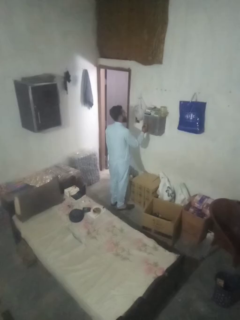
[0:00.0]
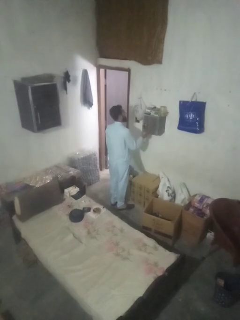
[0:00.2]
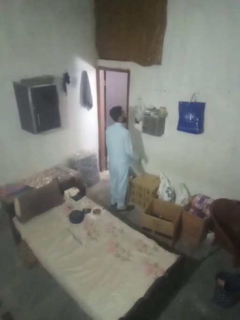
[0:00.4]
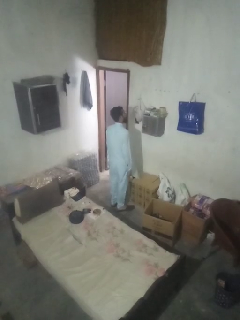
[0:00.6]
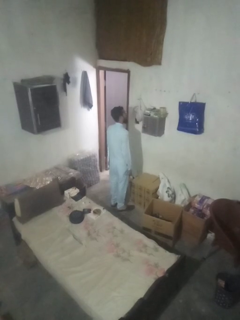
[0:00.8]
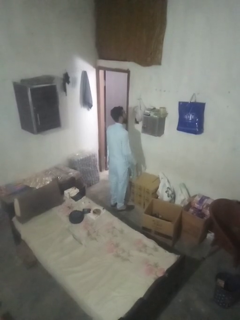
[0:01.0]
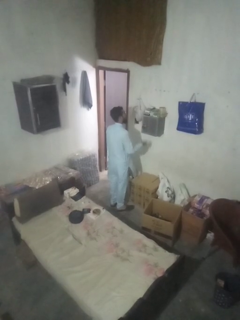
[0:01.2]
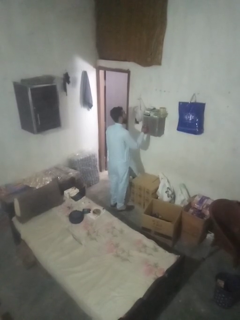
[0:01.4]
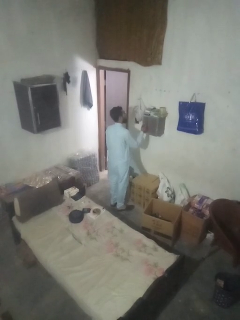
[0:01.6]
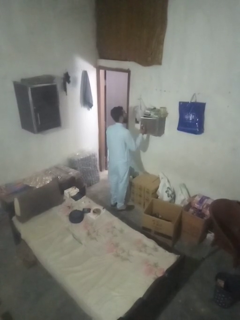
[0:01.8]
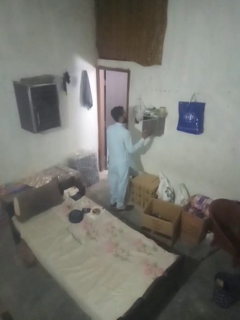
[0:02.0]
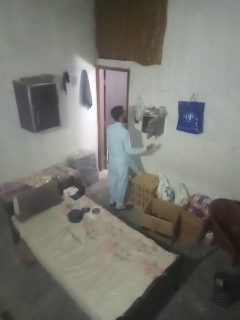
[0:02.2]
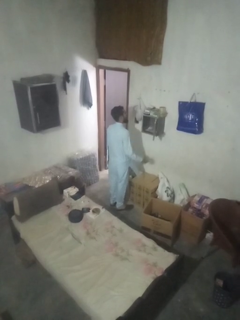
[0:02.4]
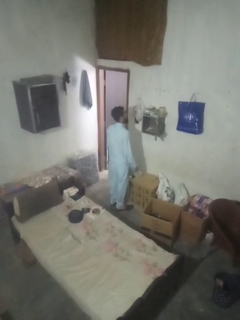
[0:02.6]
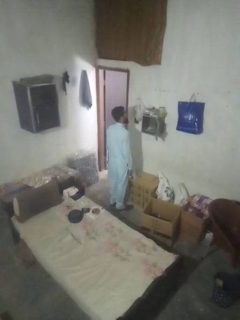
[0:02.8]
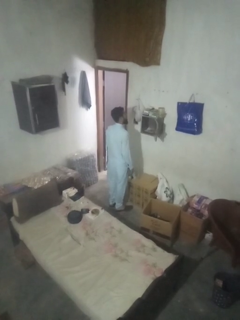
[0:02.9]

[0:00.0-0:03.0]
person opens mailbox

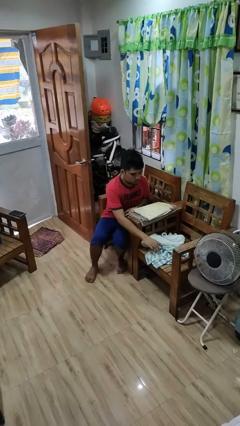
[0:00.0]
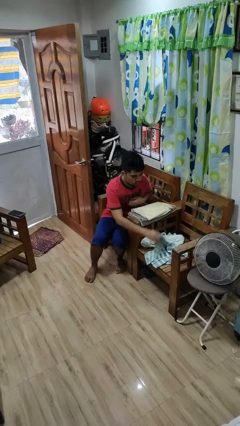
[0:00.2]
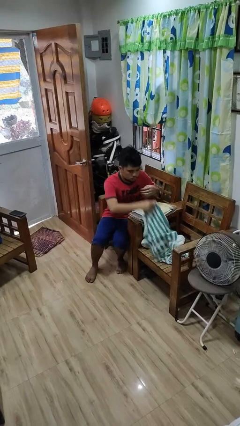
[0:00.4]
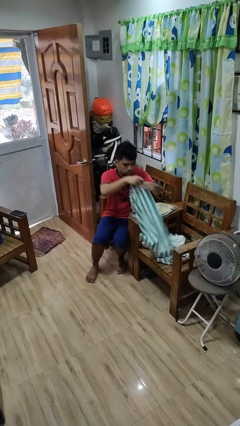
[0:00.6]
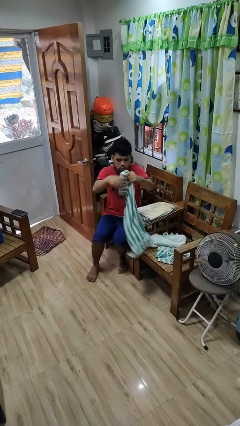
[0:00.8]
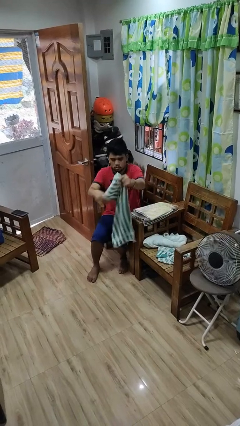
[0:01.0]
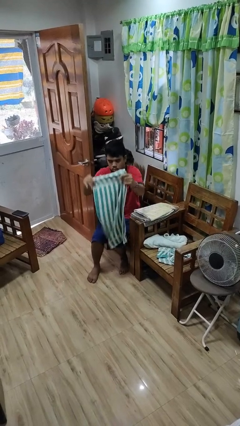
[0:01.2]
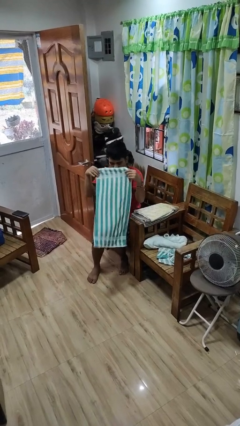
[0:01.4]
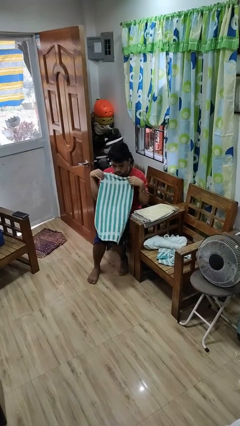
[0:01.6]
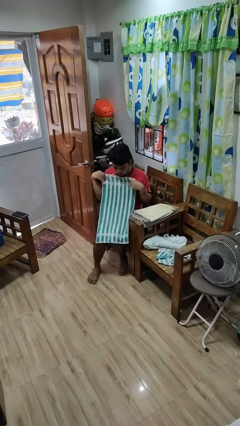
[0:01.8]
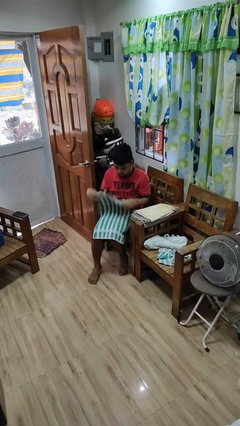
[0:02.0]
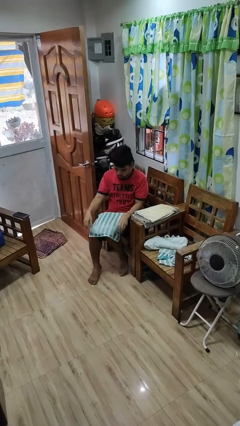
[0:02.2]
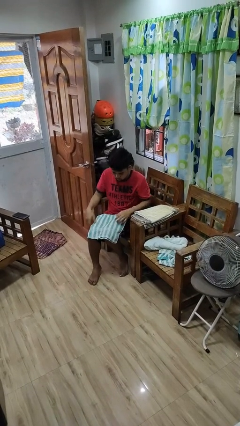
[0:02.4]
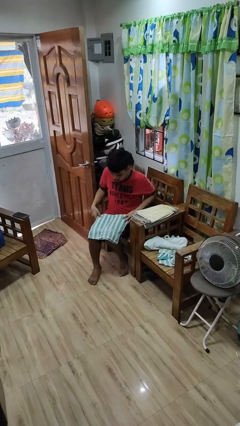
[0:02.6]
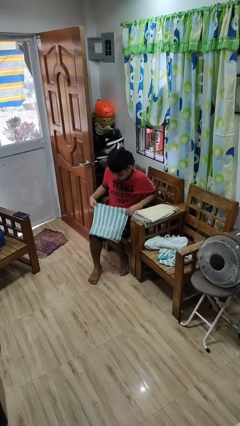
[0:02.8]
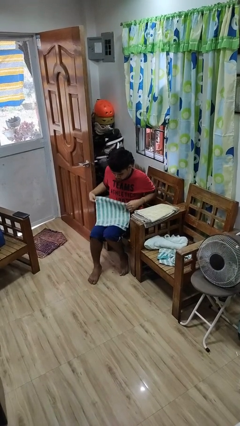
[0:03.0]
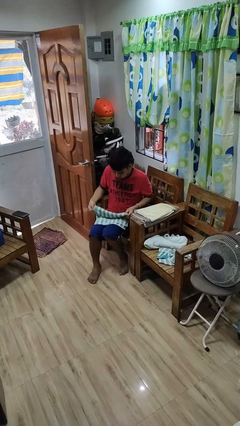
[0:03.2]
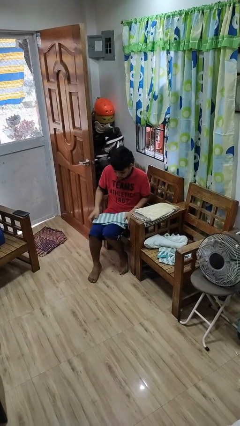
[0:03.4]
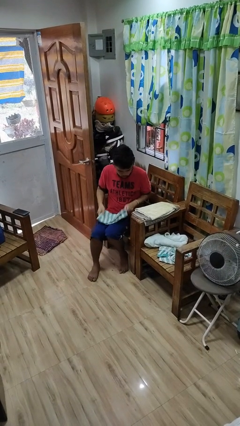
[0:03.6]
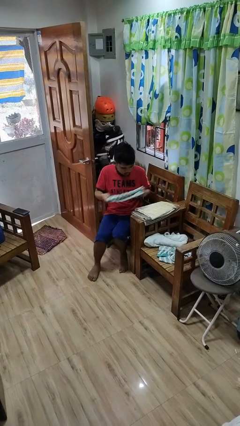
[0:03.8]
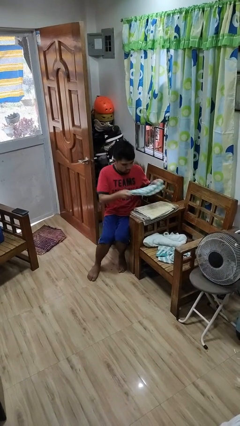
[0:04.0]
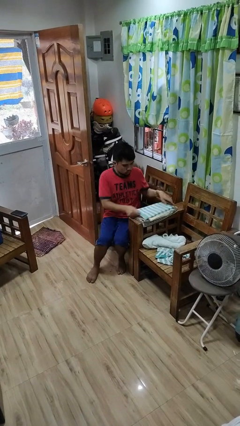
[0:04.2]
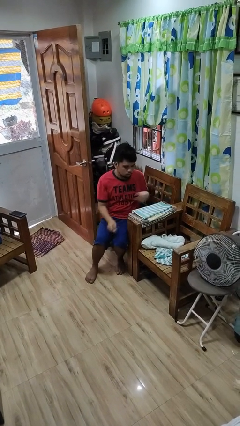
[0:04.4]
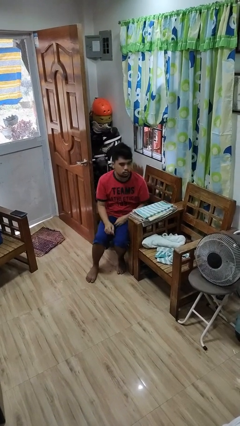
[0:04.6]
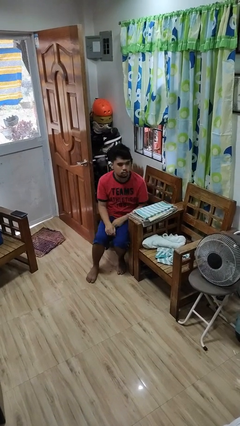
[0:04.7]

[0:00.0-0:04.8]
person folds towel

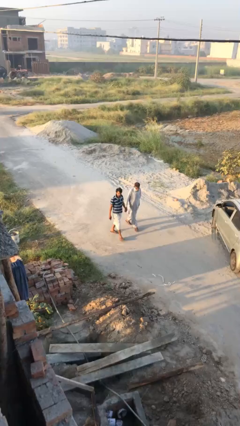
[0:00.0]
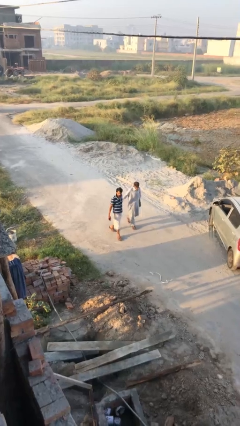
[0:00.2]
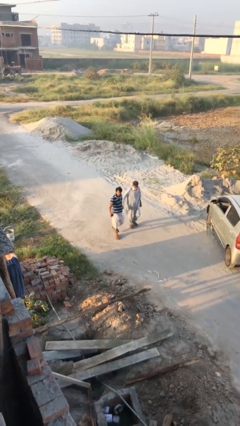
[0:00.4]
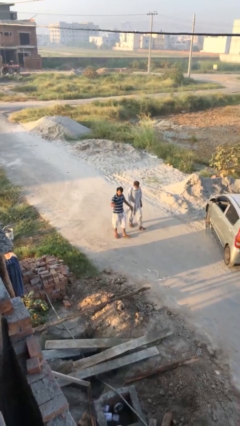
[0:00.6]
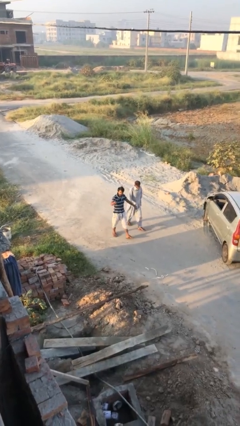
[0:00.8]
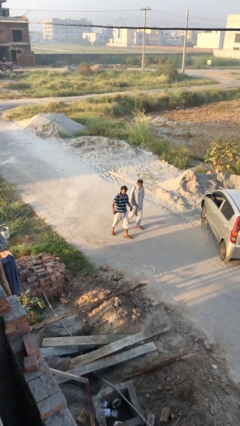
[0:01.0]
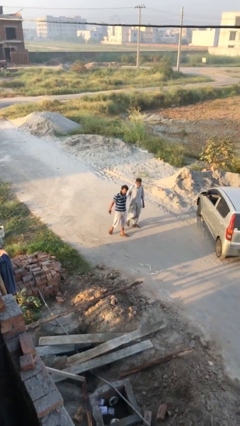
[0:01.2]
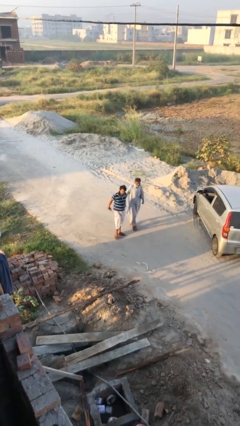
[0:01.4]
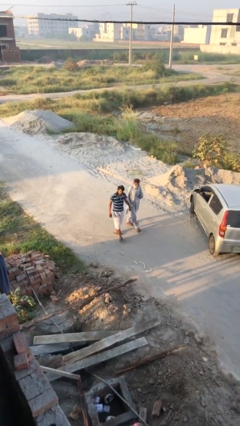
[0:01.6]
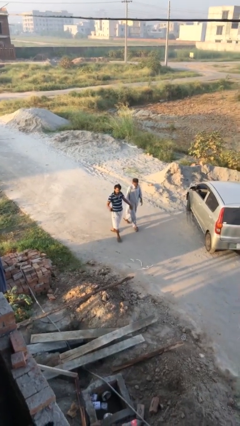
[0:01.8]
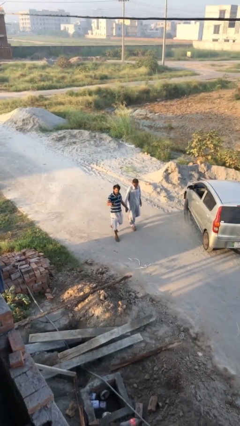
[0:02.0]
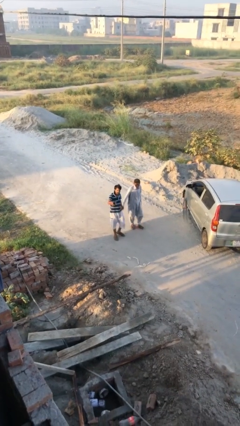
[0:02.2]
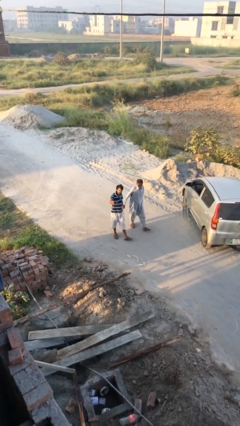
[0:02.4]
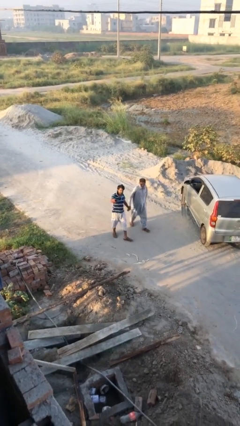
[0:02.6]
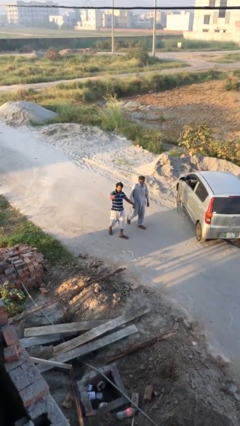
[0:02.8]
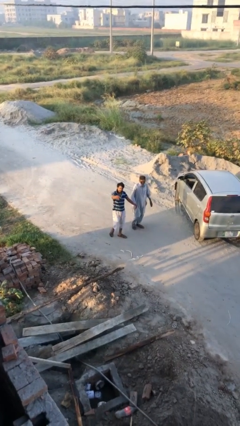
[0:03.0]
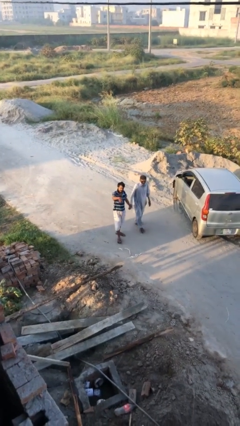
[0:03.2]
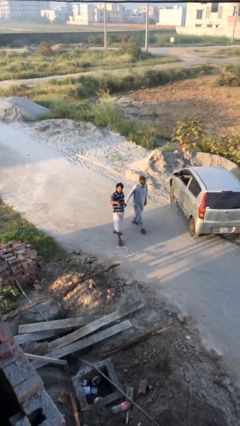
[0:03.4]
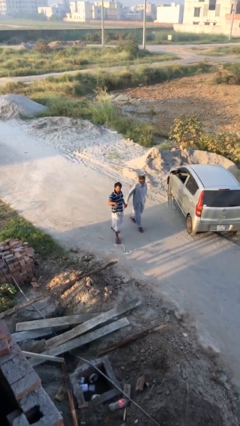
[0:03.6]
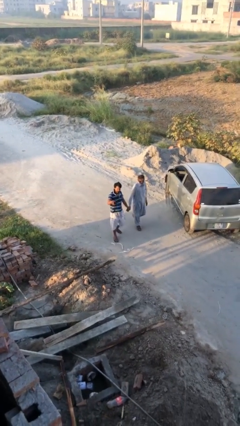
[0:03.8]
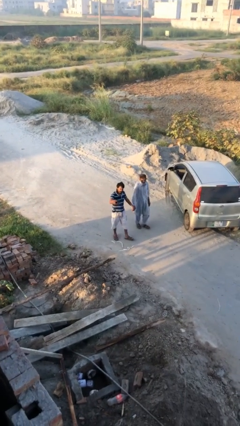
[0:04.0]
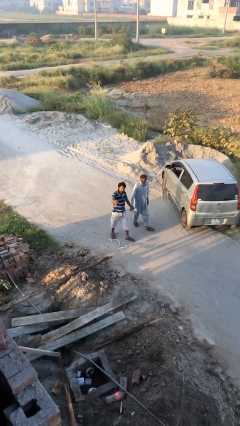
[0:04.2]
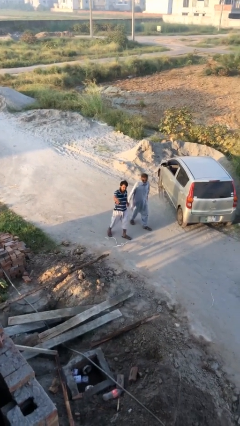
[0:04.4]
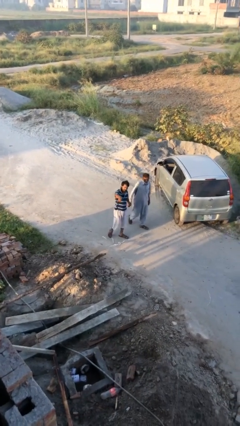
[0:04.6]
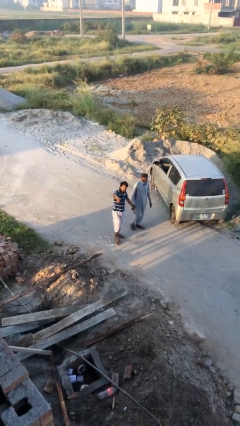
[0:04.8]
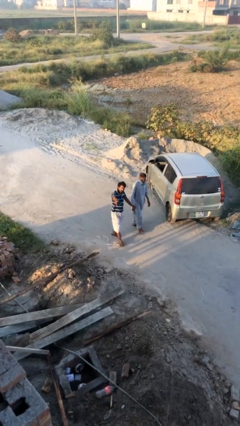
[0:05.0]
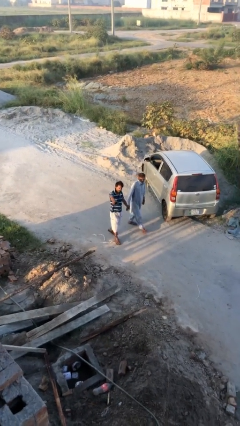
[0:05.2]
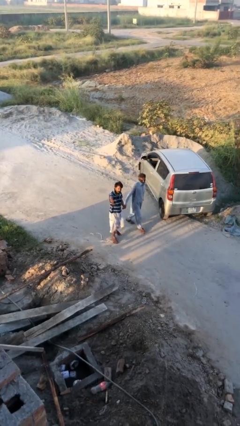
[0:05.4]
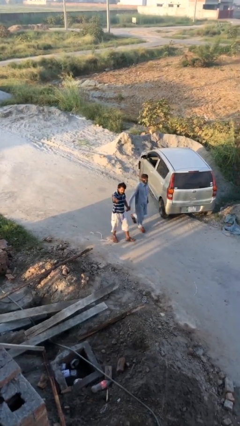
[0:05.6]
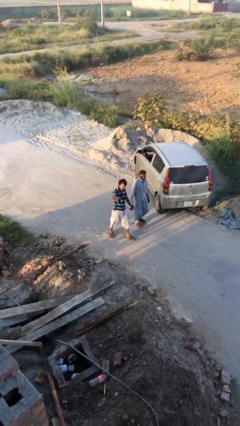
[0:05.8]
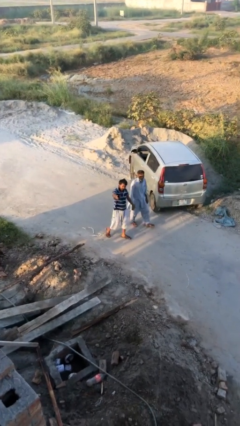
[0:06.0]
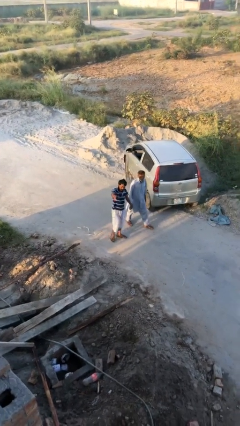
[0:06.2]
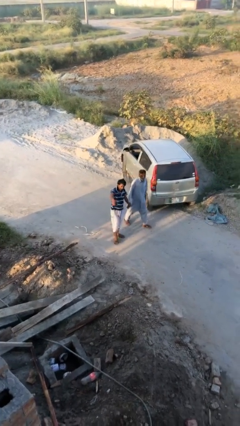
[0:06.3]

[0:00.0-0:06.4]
person holds hand

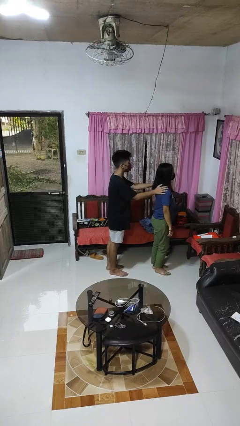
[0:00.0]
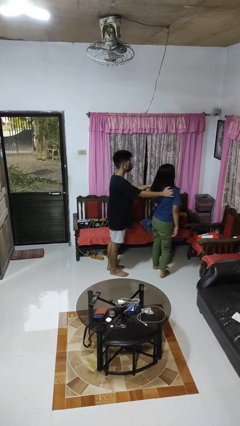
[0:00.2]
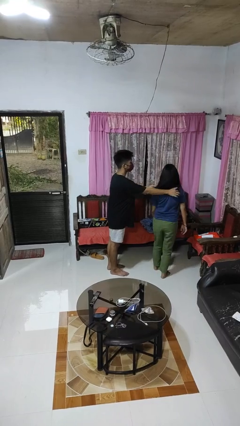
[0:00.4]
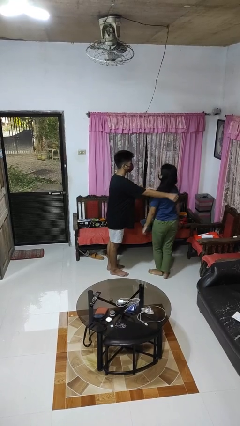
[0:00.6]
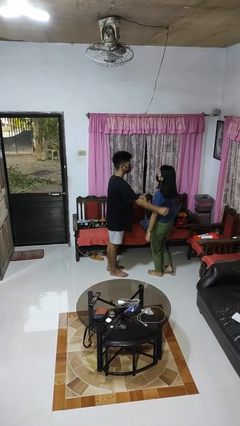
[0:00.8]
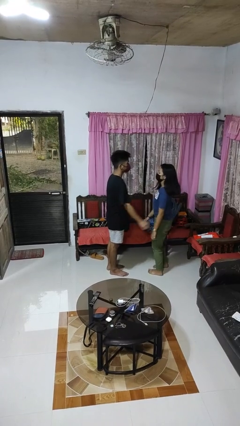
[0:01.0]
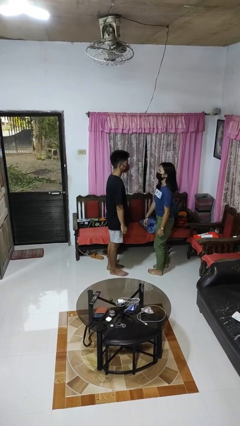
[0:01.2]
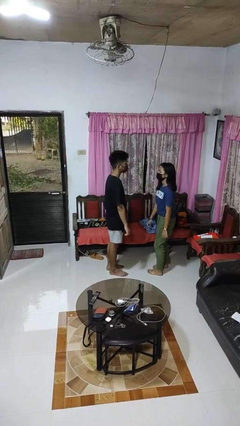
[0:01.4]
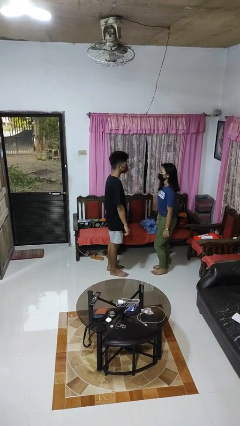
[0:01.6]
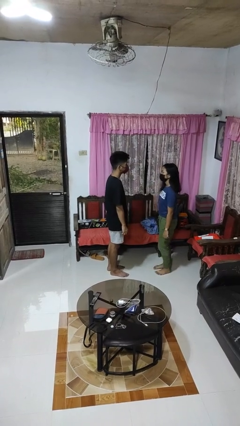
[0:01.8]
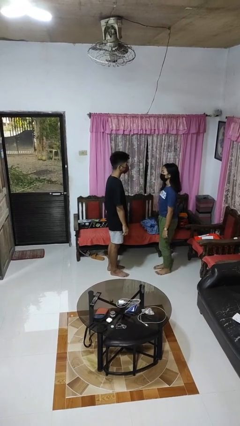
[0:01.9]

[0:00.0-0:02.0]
person spins person around

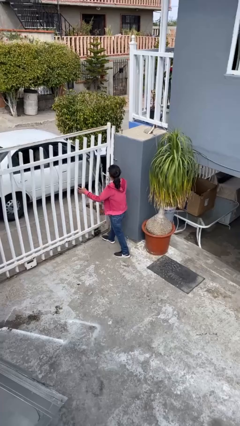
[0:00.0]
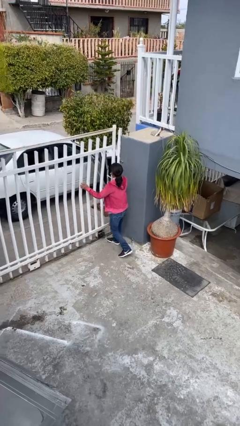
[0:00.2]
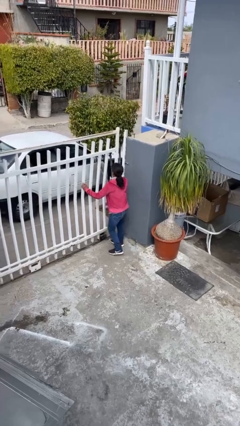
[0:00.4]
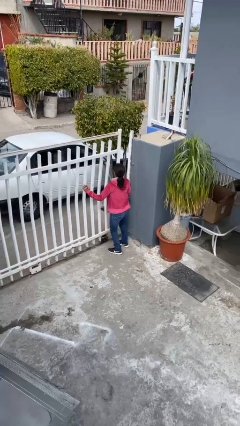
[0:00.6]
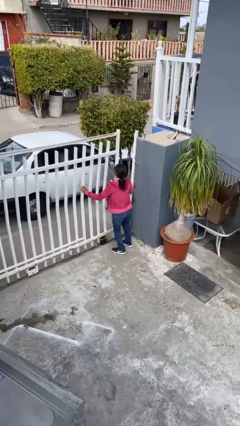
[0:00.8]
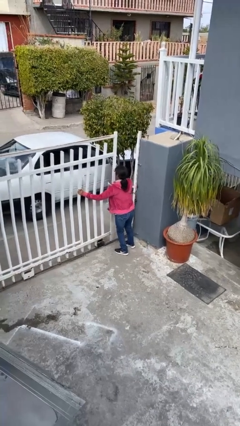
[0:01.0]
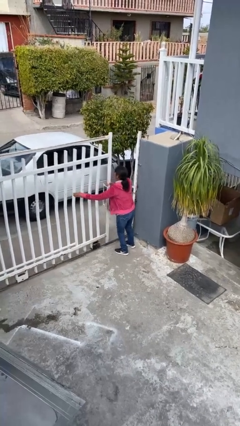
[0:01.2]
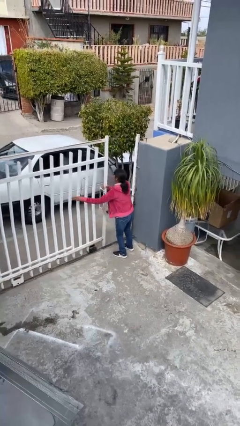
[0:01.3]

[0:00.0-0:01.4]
person opens facility door

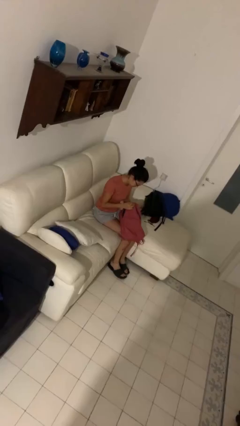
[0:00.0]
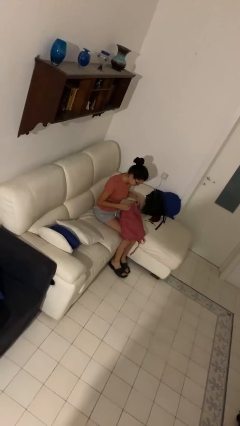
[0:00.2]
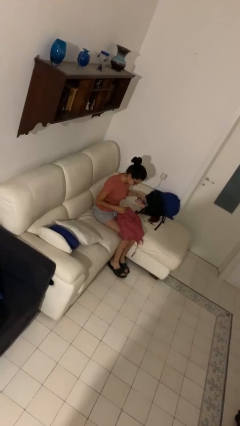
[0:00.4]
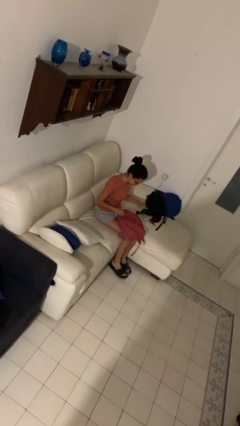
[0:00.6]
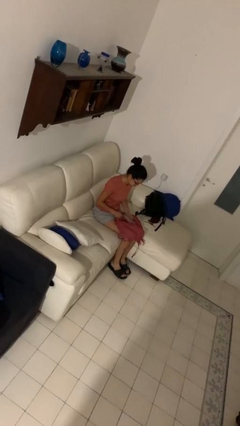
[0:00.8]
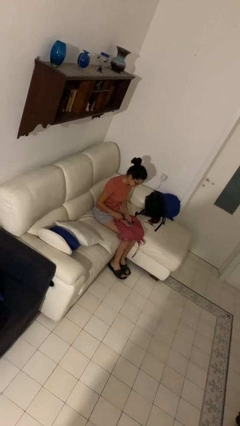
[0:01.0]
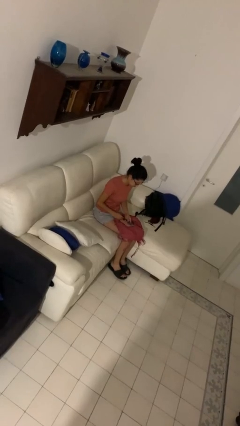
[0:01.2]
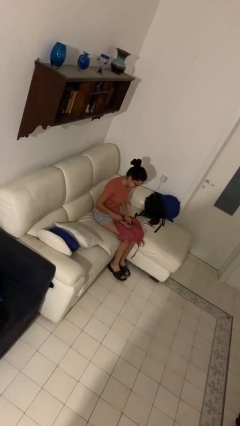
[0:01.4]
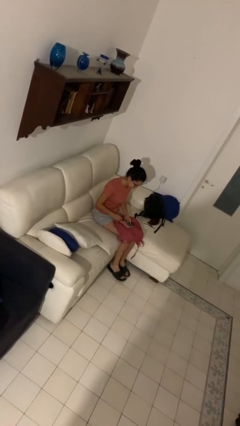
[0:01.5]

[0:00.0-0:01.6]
person takes object from purse